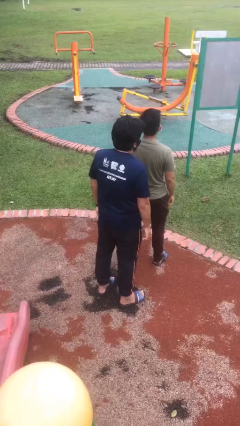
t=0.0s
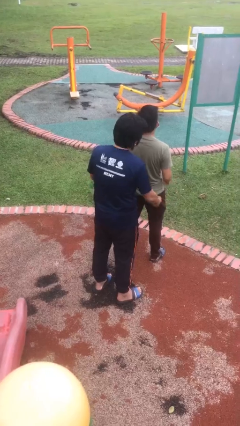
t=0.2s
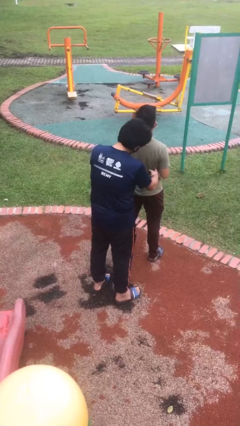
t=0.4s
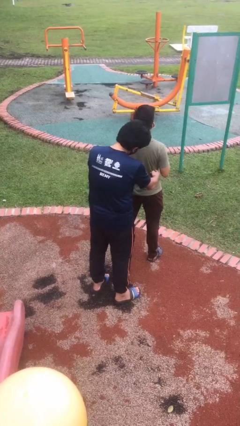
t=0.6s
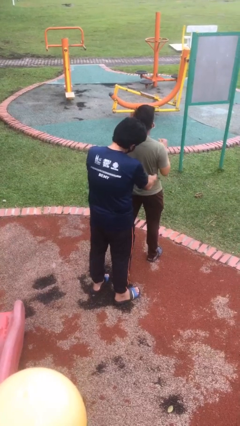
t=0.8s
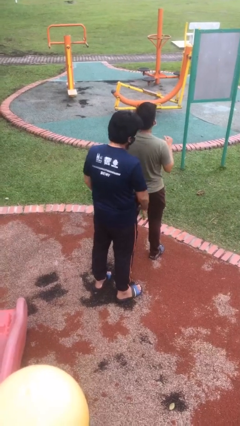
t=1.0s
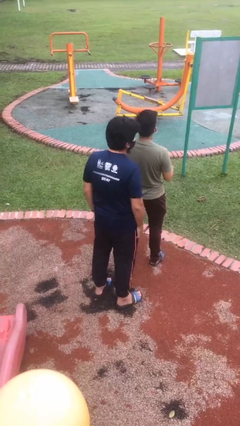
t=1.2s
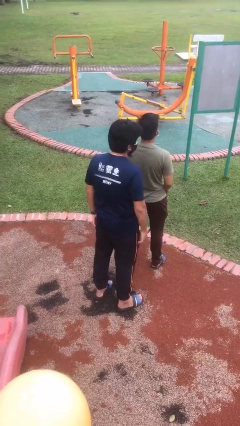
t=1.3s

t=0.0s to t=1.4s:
person tickles person

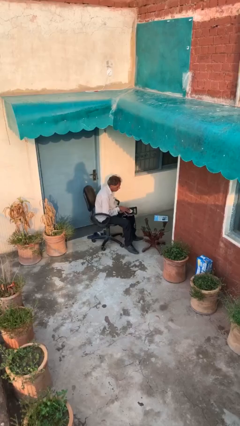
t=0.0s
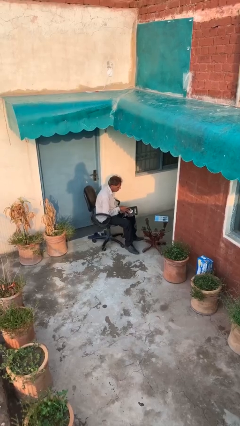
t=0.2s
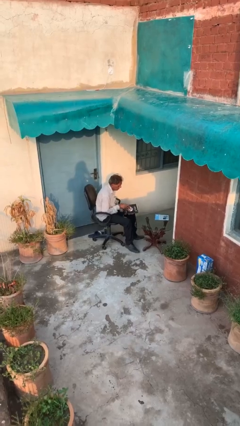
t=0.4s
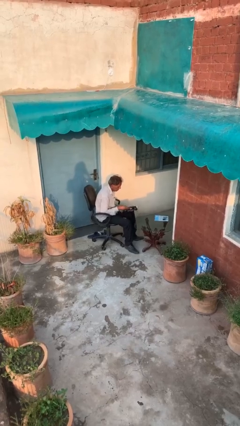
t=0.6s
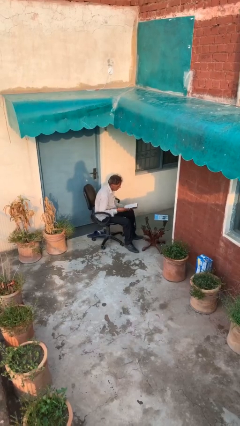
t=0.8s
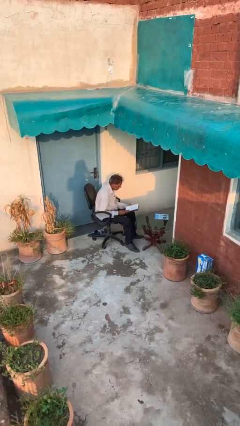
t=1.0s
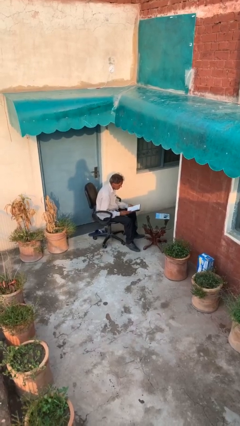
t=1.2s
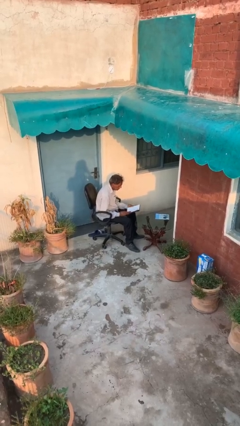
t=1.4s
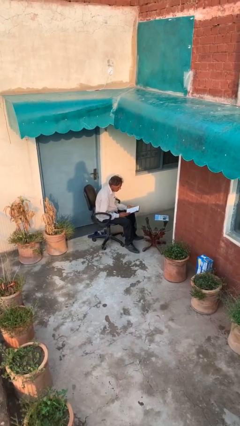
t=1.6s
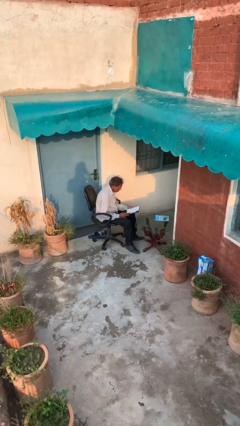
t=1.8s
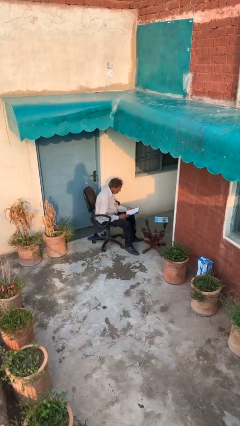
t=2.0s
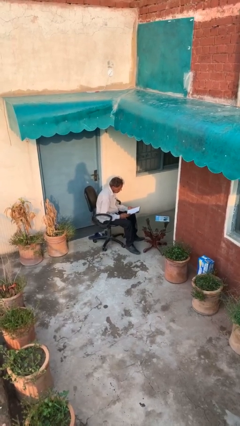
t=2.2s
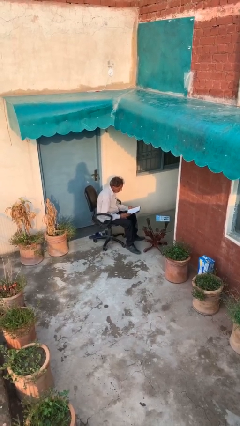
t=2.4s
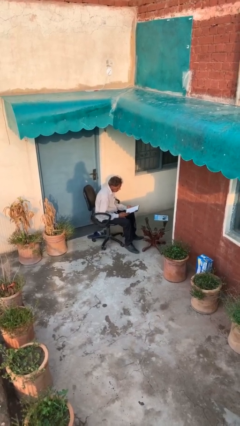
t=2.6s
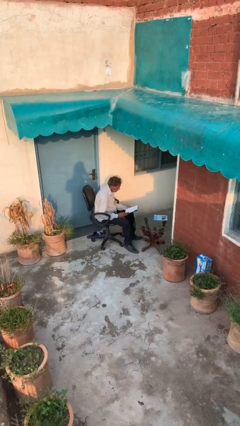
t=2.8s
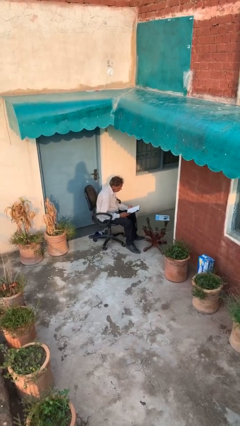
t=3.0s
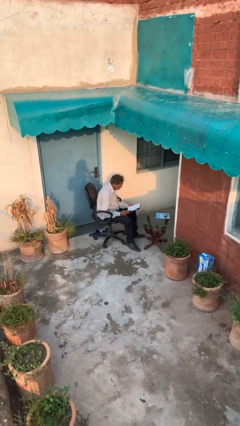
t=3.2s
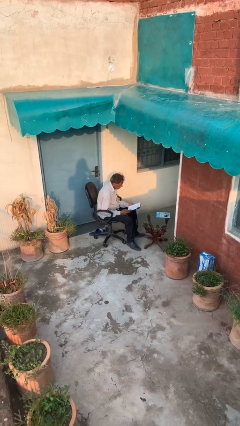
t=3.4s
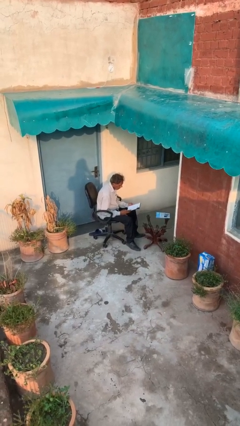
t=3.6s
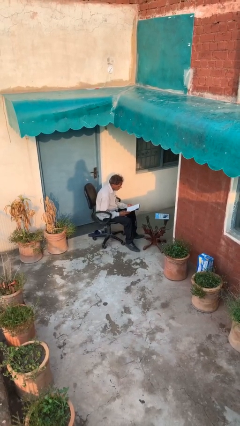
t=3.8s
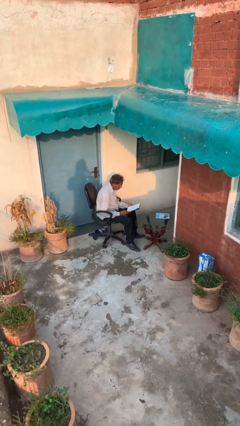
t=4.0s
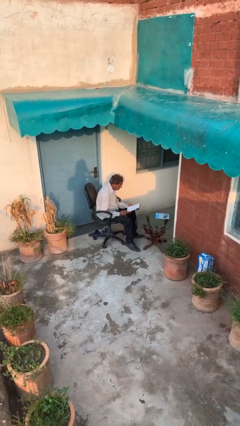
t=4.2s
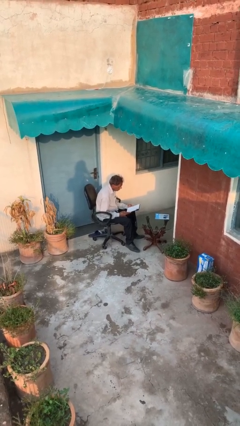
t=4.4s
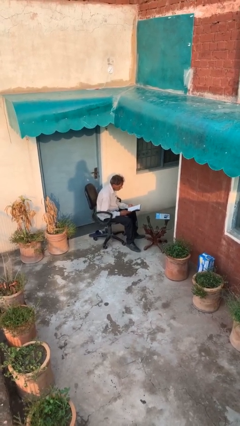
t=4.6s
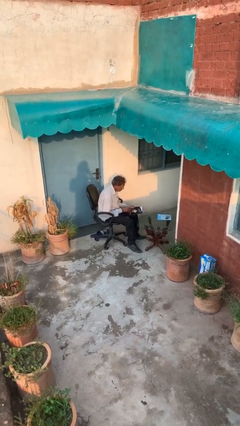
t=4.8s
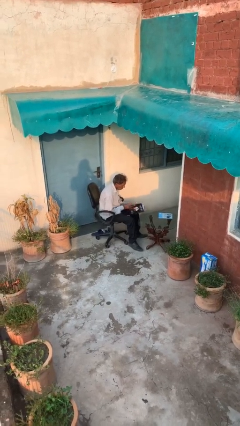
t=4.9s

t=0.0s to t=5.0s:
person reads document

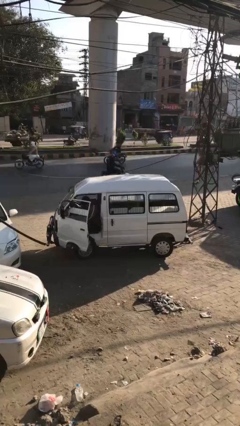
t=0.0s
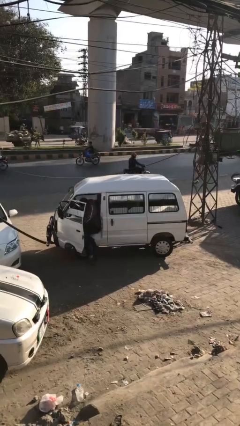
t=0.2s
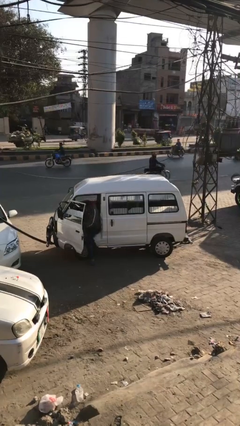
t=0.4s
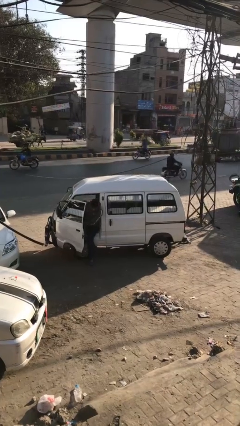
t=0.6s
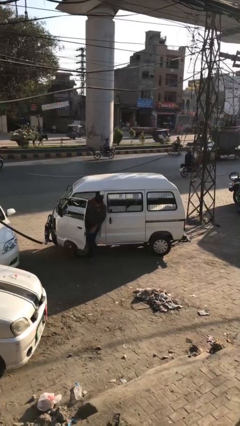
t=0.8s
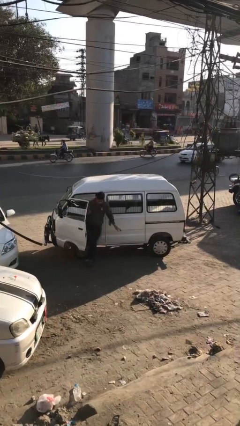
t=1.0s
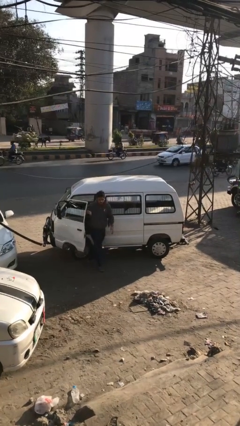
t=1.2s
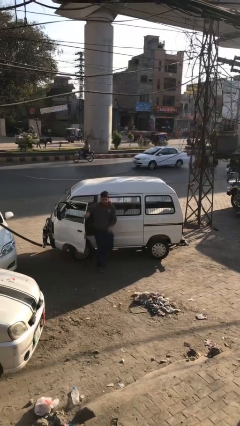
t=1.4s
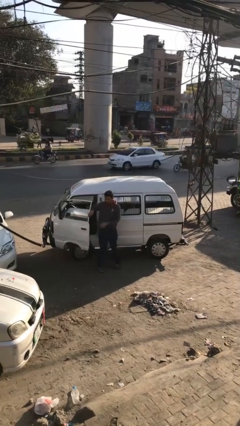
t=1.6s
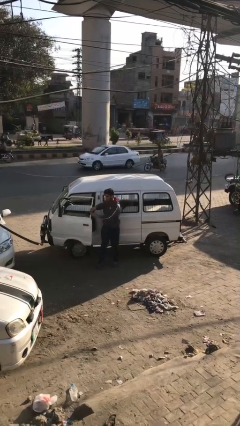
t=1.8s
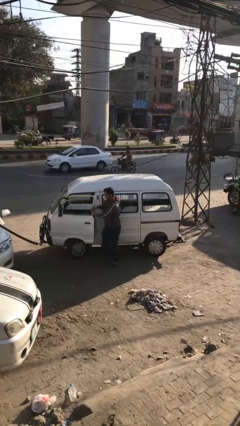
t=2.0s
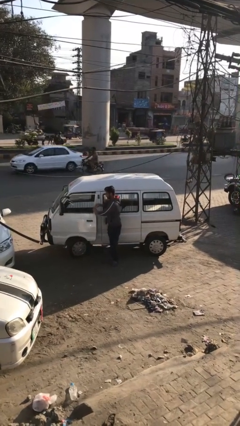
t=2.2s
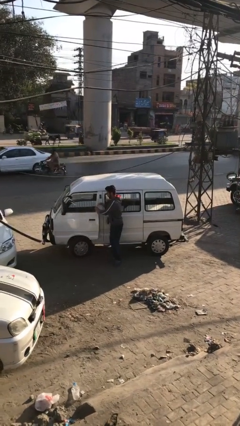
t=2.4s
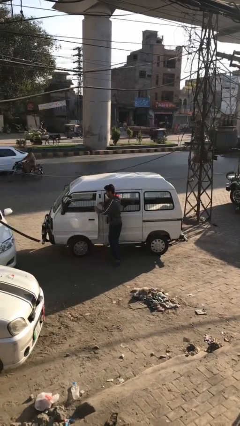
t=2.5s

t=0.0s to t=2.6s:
car drops off person

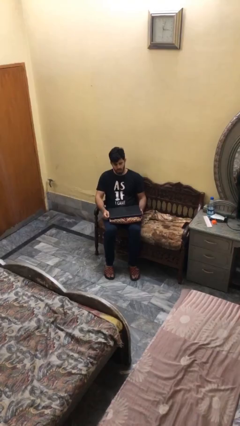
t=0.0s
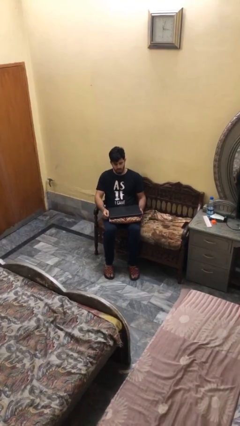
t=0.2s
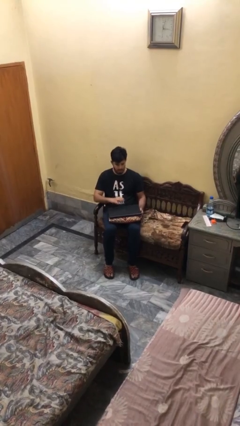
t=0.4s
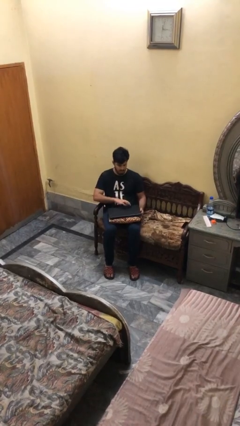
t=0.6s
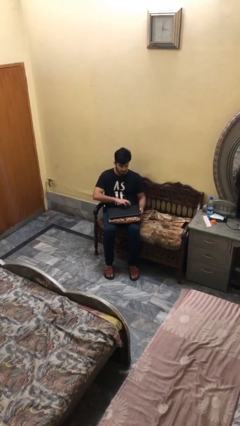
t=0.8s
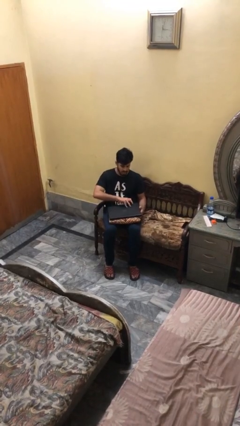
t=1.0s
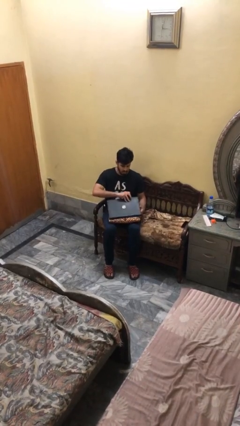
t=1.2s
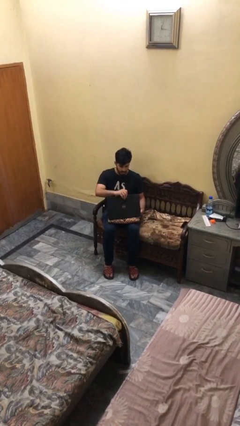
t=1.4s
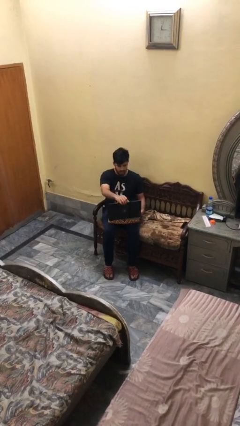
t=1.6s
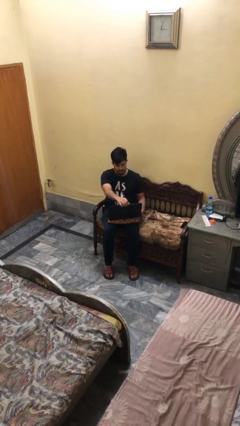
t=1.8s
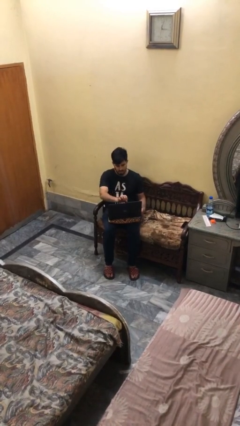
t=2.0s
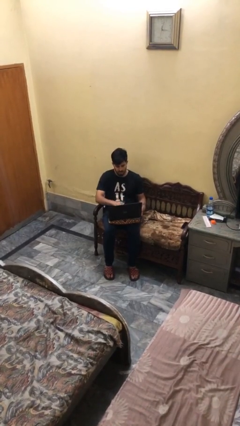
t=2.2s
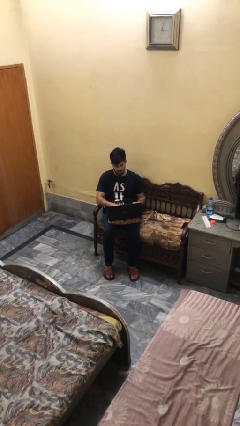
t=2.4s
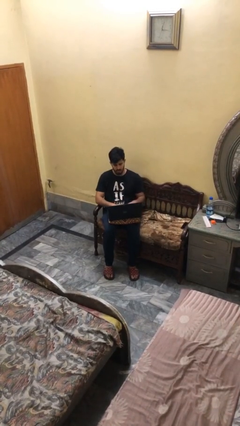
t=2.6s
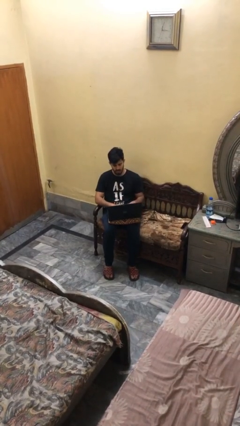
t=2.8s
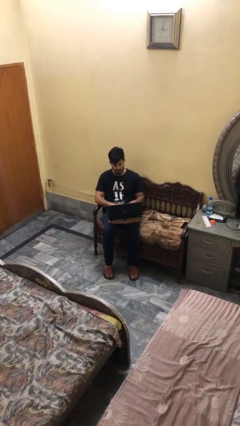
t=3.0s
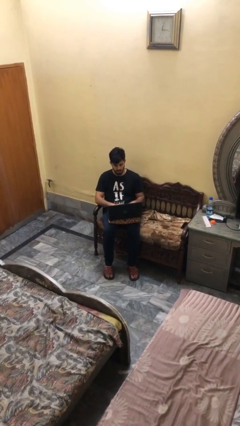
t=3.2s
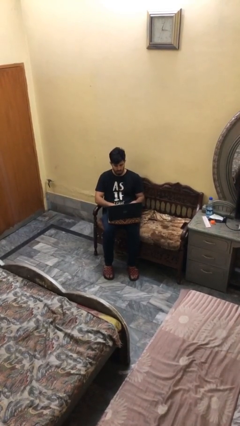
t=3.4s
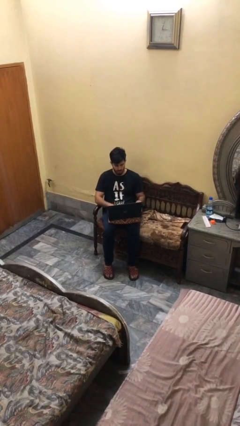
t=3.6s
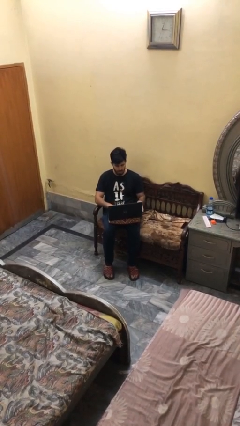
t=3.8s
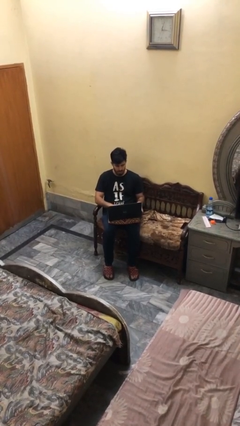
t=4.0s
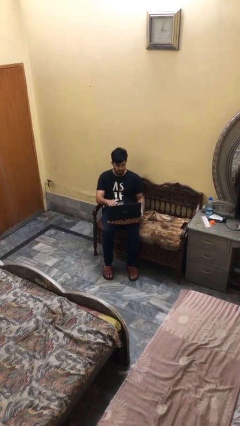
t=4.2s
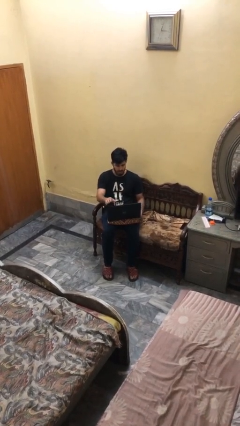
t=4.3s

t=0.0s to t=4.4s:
person opens laptop

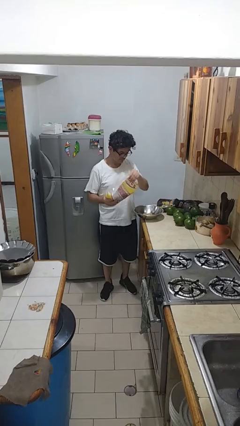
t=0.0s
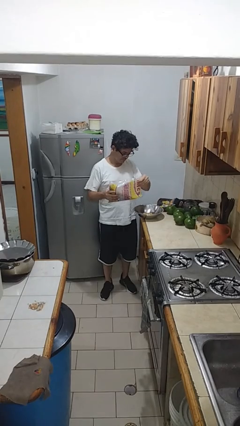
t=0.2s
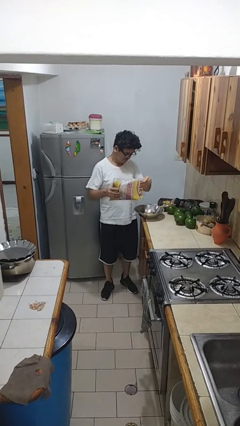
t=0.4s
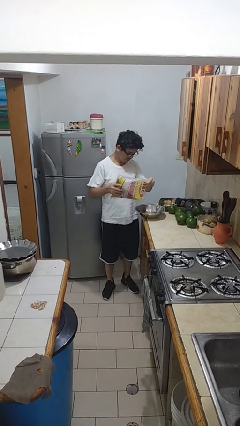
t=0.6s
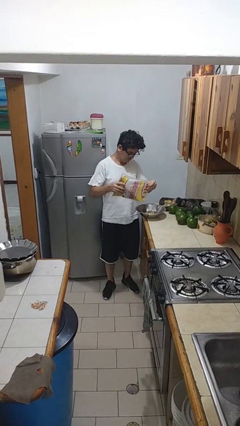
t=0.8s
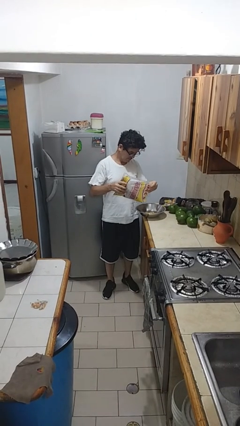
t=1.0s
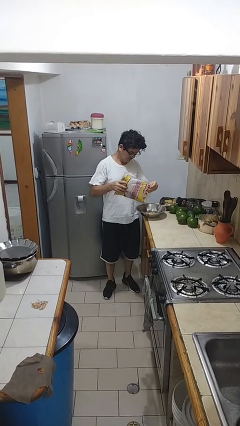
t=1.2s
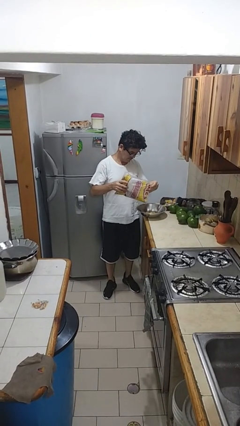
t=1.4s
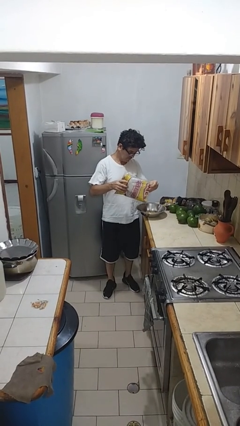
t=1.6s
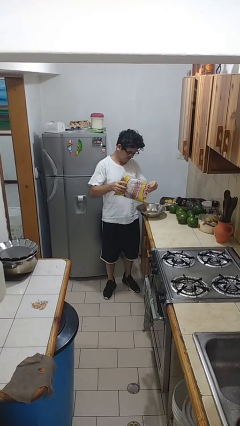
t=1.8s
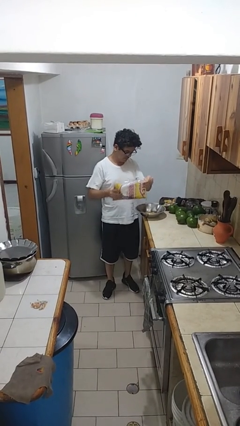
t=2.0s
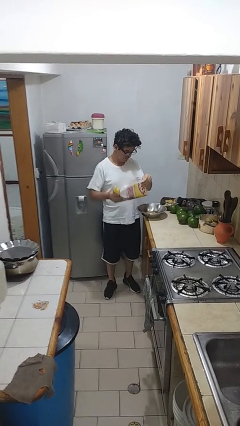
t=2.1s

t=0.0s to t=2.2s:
person pours into bowl

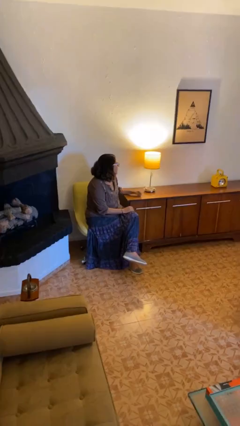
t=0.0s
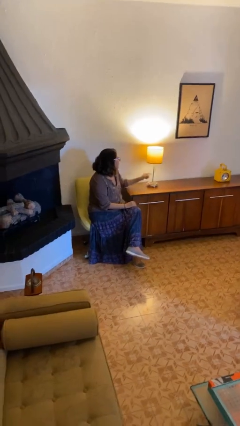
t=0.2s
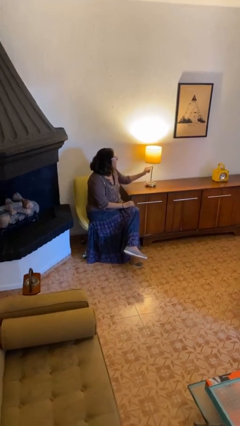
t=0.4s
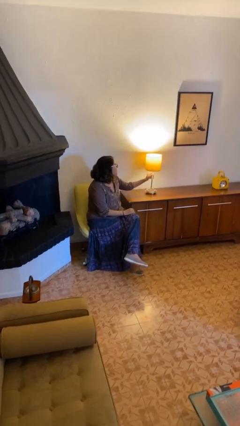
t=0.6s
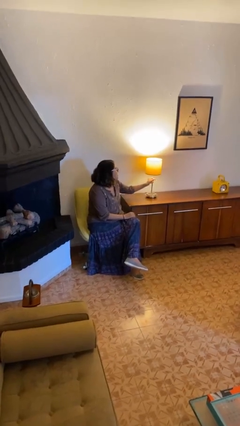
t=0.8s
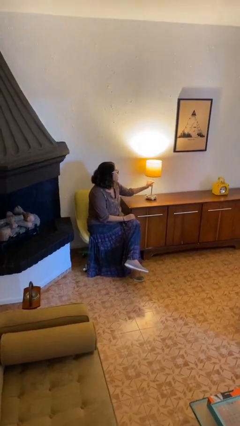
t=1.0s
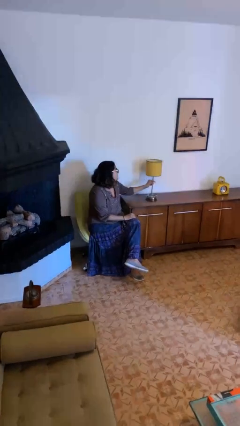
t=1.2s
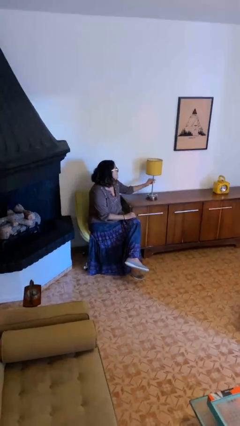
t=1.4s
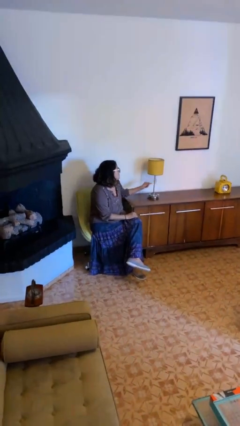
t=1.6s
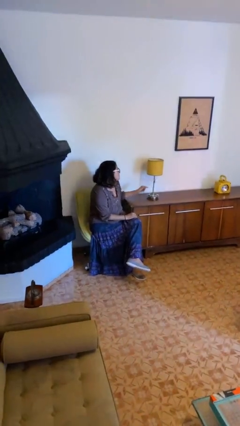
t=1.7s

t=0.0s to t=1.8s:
person turns off lamp

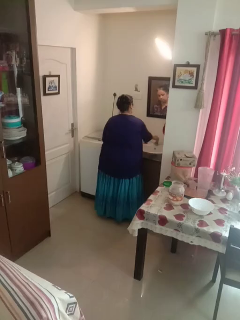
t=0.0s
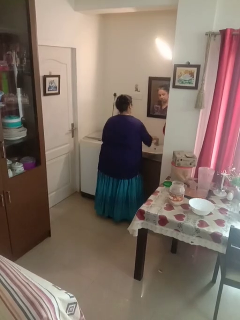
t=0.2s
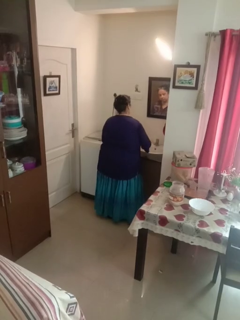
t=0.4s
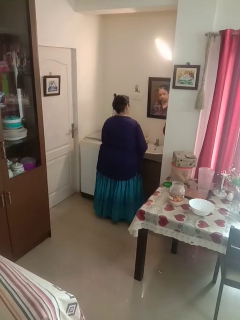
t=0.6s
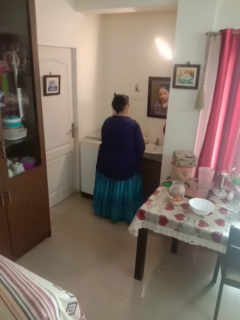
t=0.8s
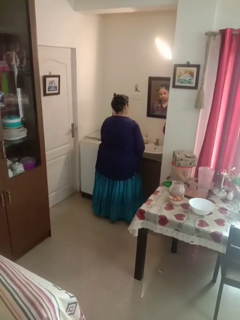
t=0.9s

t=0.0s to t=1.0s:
person turns off faucet
